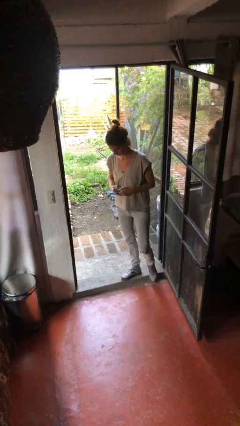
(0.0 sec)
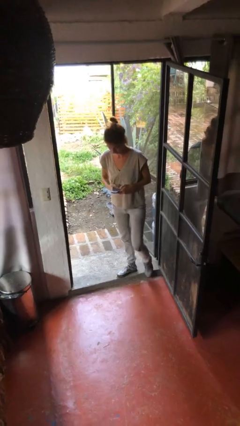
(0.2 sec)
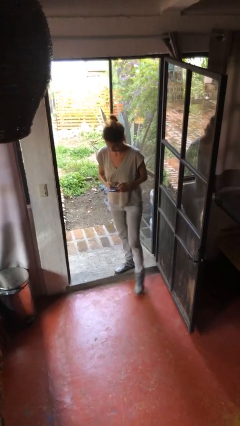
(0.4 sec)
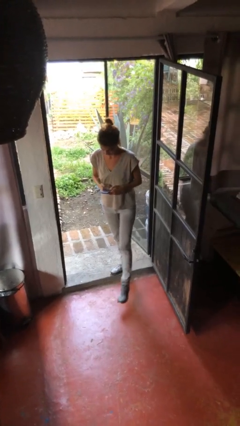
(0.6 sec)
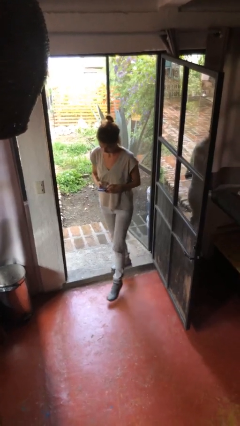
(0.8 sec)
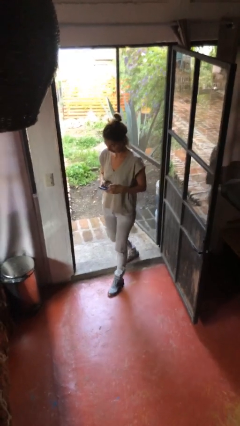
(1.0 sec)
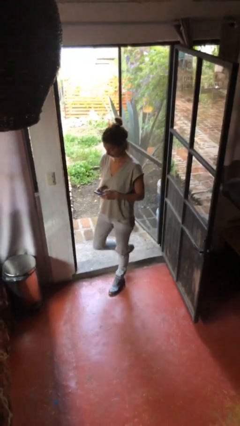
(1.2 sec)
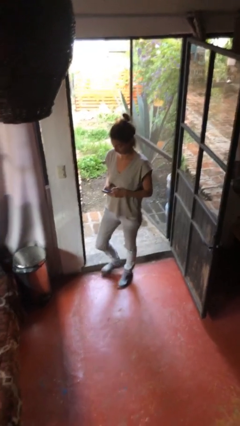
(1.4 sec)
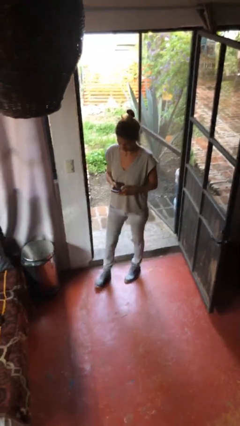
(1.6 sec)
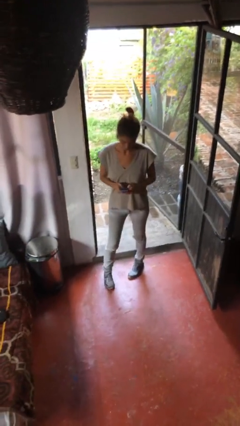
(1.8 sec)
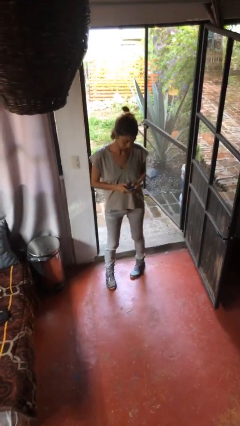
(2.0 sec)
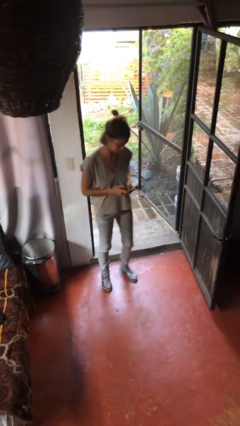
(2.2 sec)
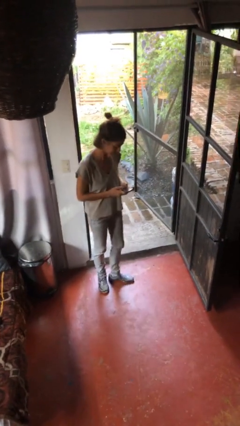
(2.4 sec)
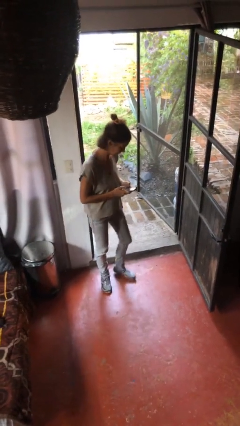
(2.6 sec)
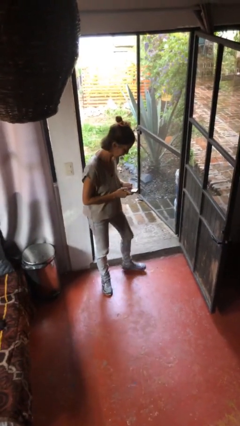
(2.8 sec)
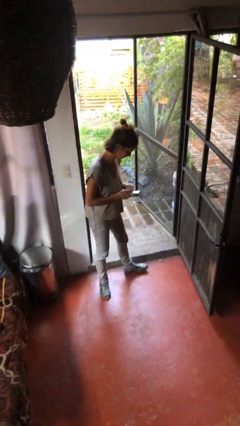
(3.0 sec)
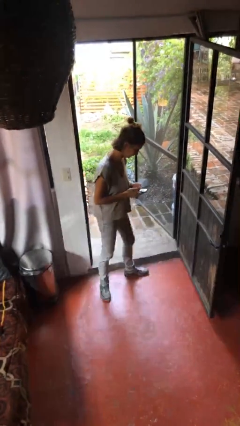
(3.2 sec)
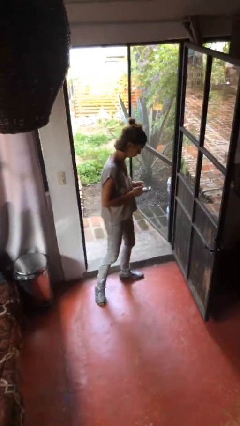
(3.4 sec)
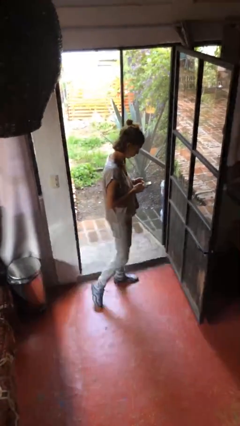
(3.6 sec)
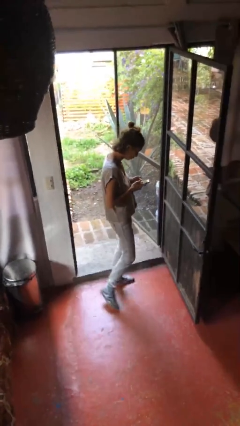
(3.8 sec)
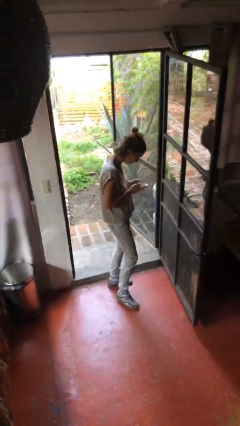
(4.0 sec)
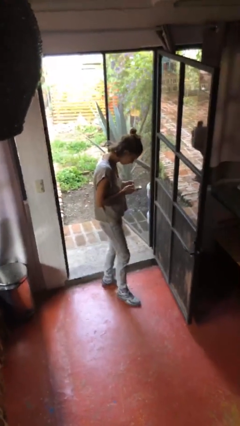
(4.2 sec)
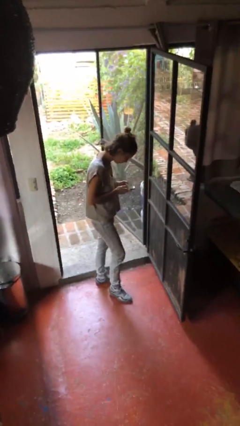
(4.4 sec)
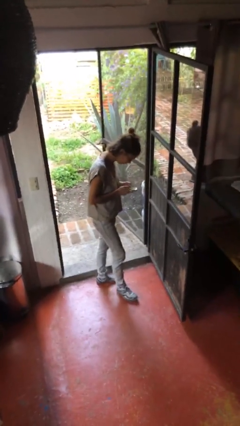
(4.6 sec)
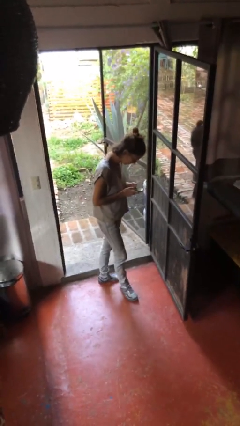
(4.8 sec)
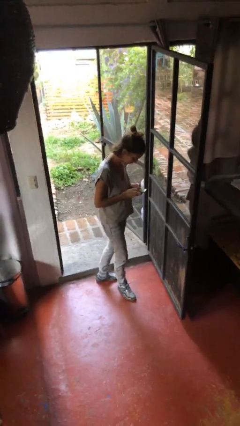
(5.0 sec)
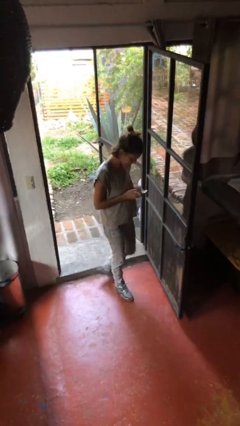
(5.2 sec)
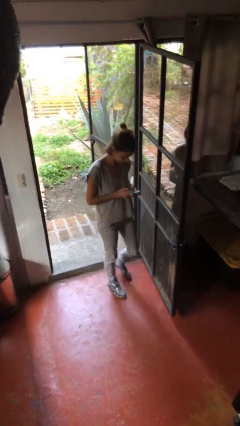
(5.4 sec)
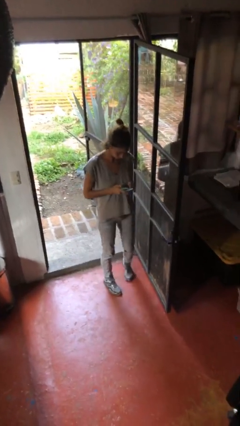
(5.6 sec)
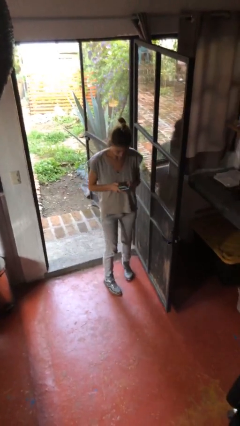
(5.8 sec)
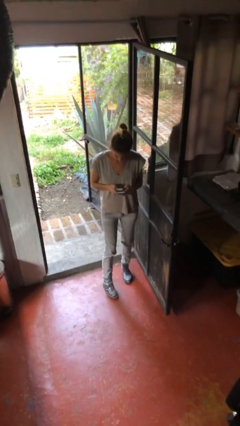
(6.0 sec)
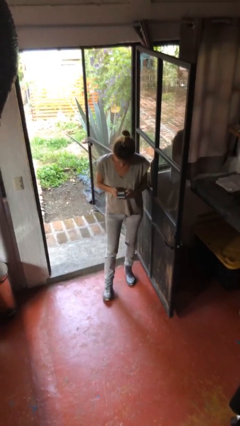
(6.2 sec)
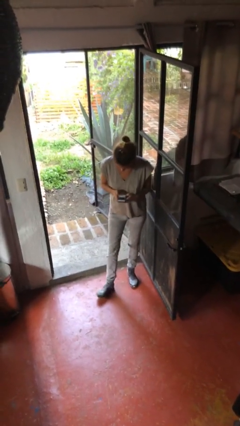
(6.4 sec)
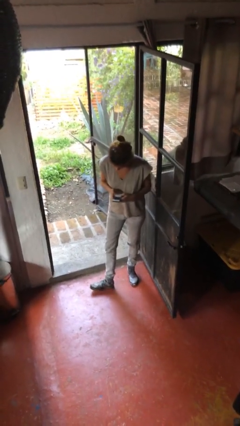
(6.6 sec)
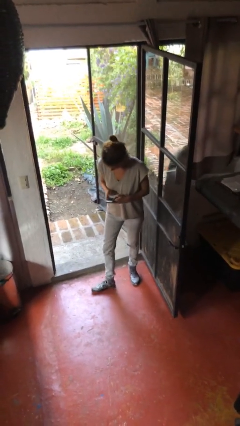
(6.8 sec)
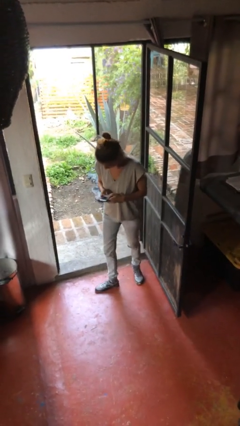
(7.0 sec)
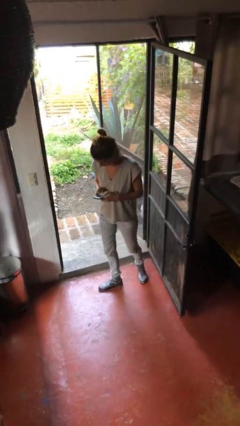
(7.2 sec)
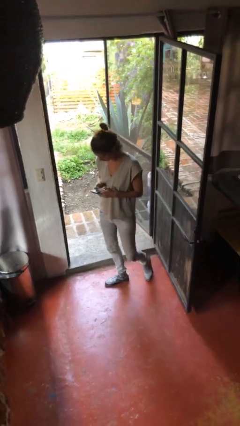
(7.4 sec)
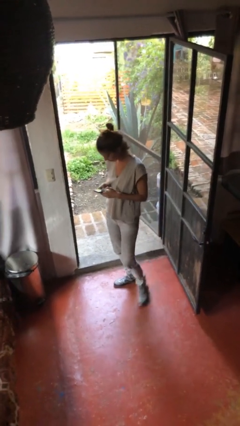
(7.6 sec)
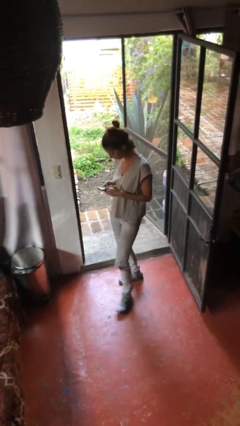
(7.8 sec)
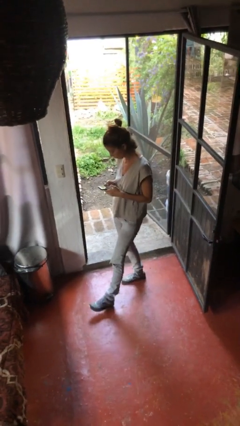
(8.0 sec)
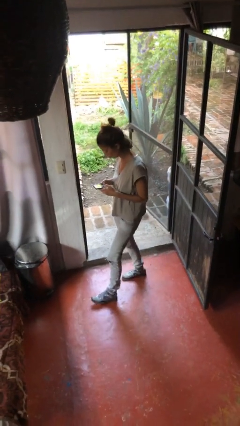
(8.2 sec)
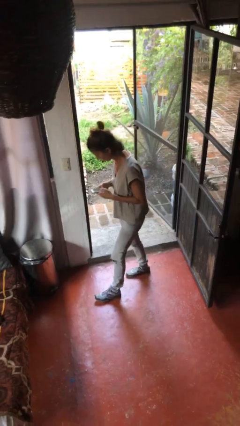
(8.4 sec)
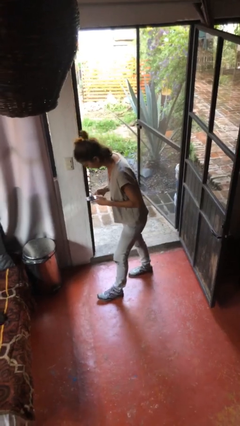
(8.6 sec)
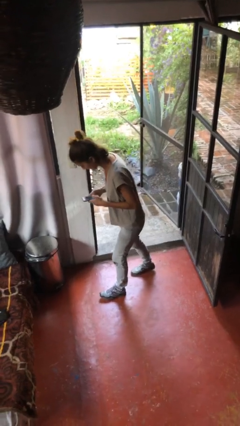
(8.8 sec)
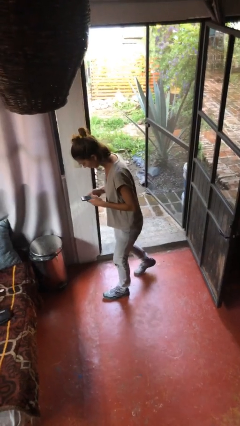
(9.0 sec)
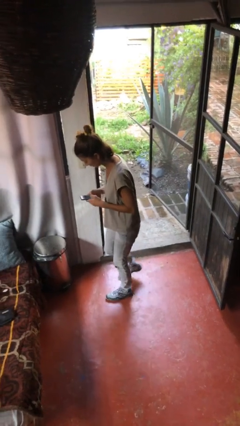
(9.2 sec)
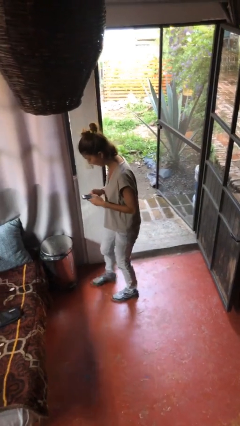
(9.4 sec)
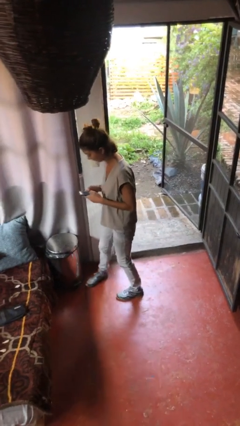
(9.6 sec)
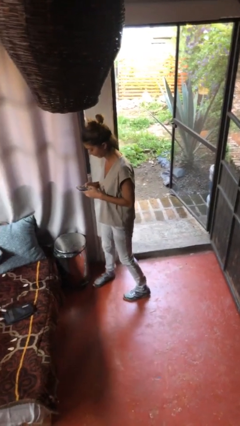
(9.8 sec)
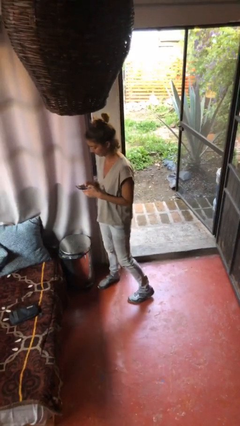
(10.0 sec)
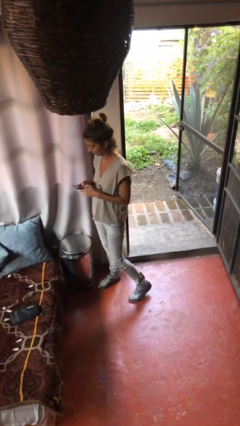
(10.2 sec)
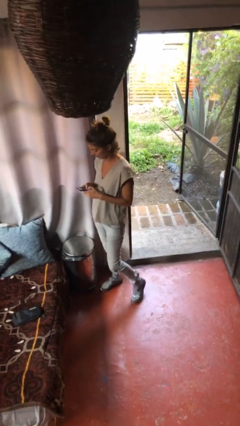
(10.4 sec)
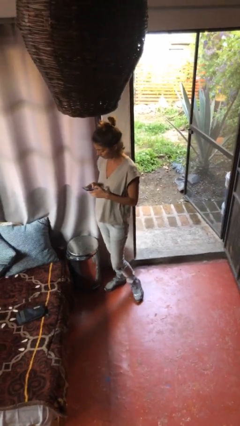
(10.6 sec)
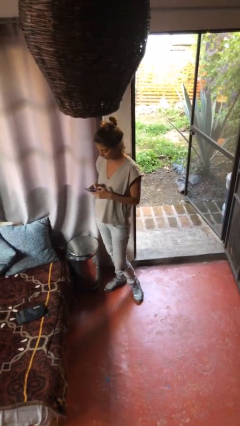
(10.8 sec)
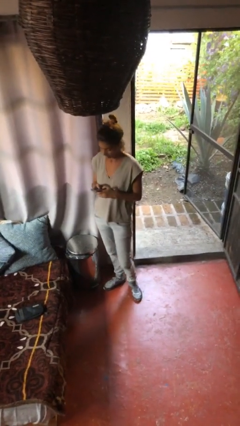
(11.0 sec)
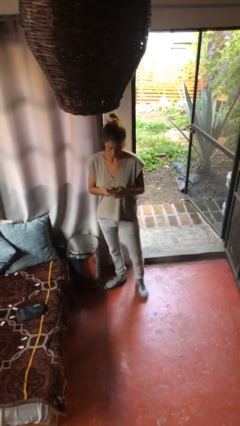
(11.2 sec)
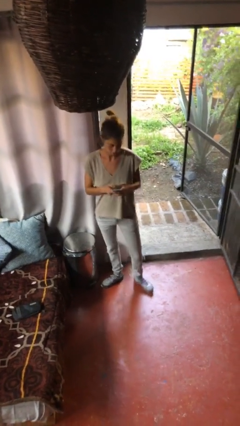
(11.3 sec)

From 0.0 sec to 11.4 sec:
person texts on phone

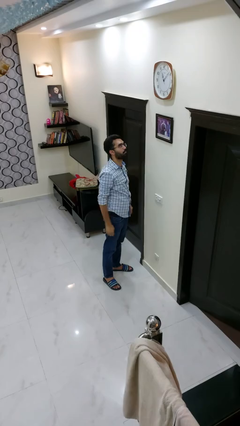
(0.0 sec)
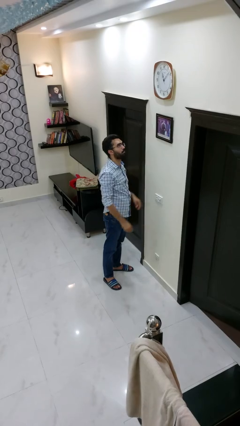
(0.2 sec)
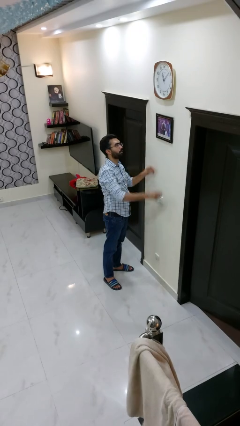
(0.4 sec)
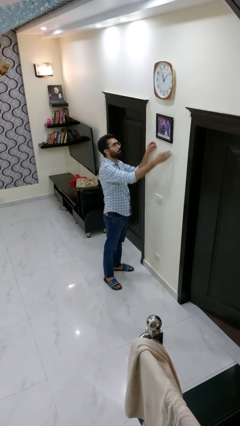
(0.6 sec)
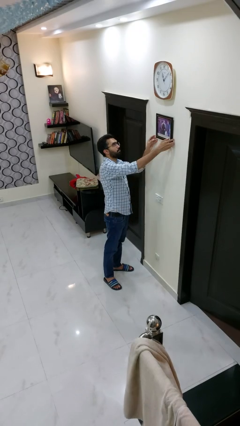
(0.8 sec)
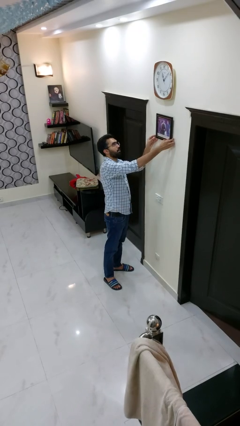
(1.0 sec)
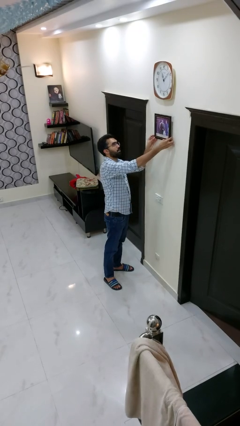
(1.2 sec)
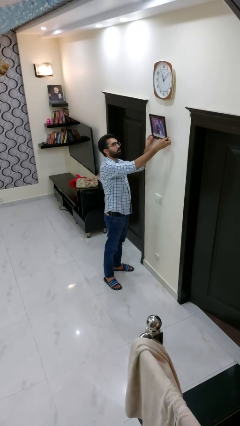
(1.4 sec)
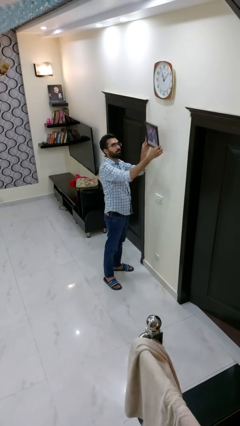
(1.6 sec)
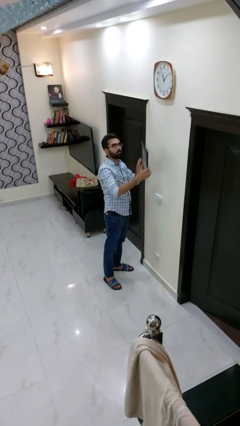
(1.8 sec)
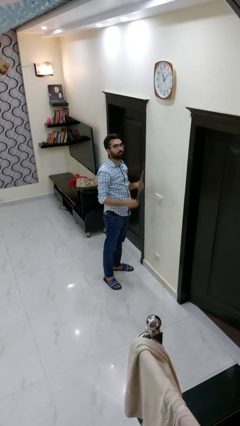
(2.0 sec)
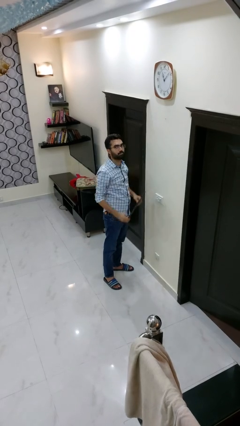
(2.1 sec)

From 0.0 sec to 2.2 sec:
person takes down picture frame

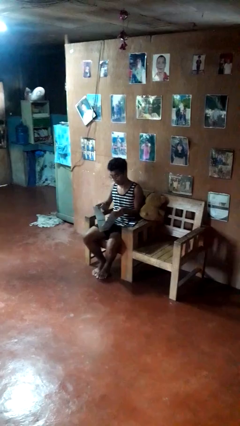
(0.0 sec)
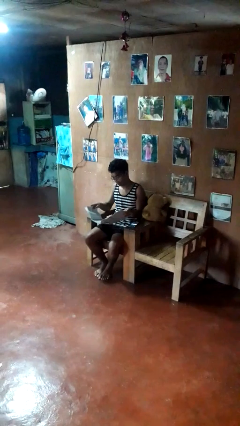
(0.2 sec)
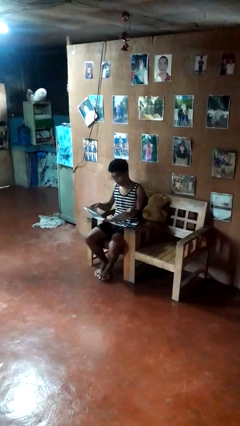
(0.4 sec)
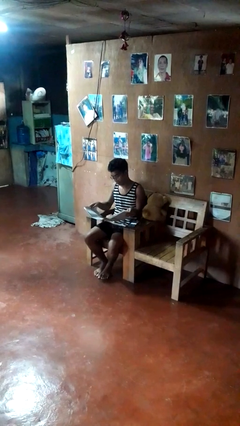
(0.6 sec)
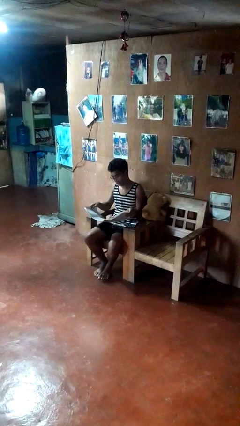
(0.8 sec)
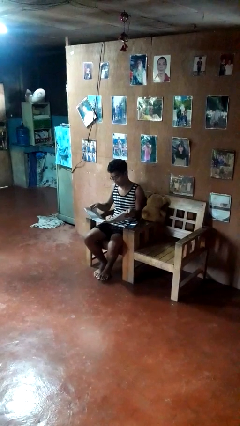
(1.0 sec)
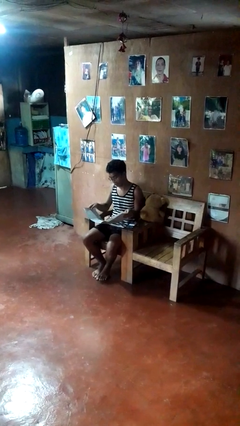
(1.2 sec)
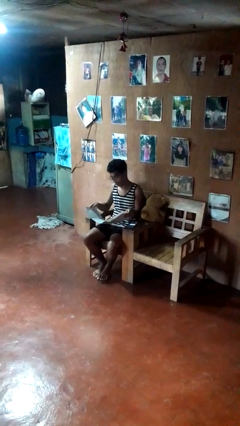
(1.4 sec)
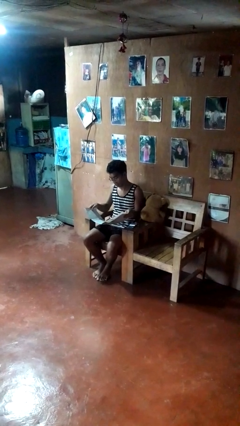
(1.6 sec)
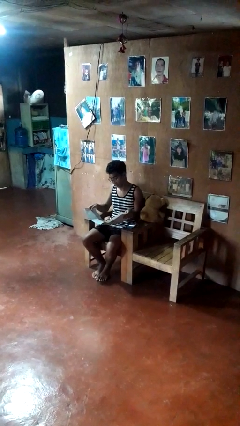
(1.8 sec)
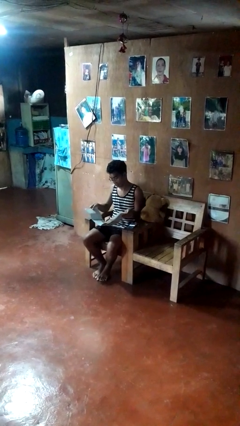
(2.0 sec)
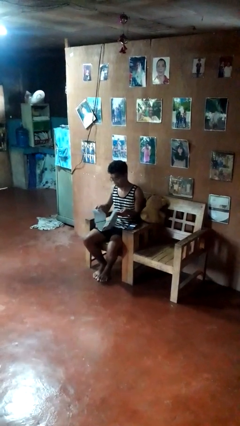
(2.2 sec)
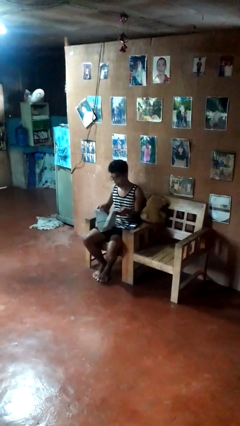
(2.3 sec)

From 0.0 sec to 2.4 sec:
person reads newspaper

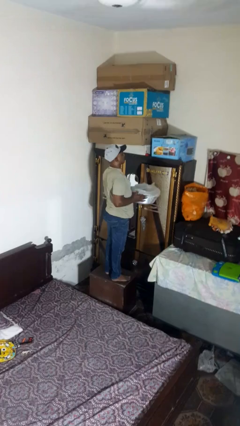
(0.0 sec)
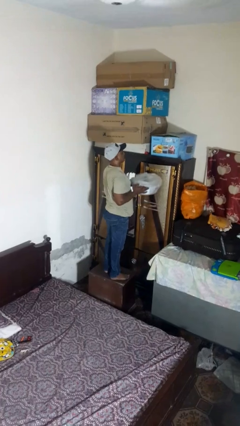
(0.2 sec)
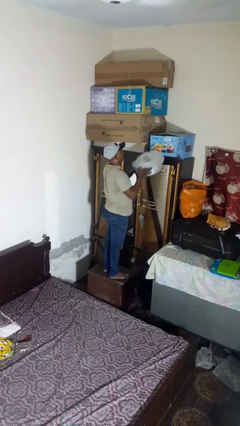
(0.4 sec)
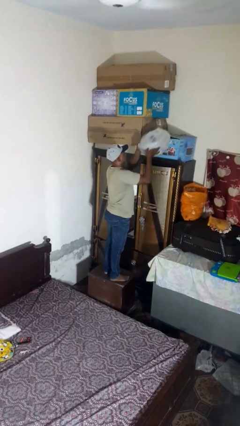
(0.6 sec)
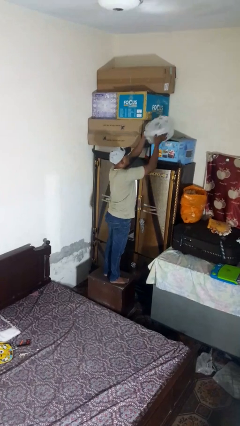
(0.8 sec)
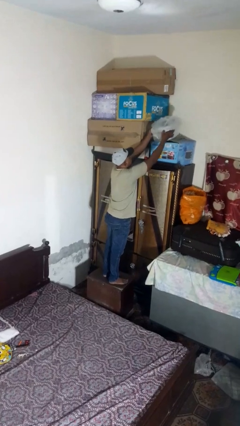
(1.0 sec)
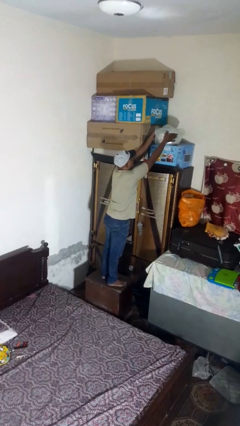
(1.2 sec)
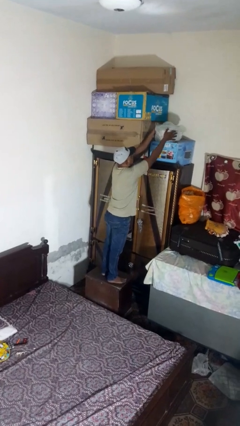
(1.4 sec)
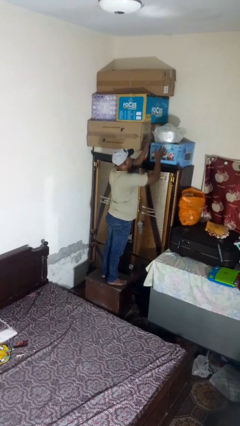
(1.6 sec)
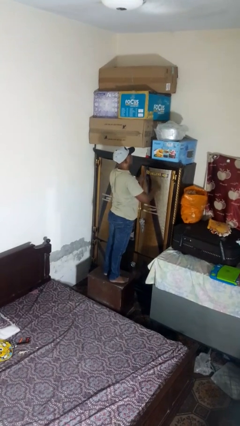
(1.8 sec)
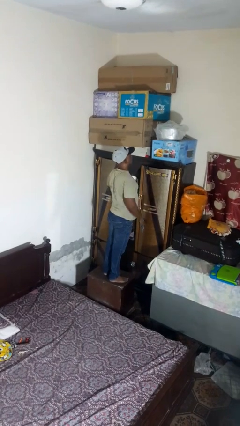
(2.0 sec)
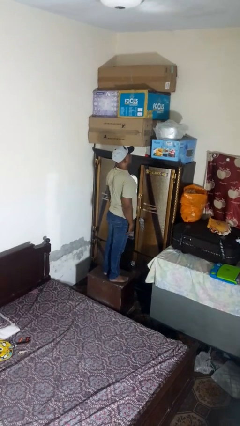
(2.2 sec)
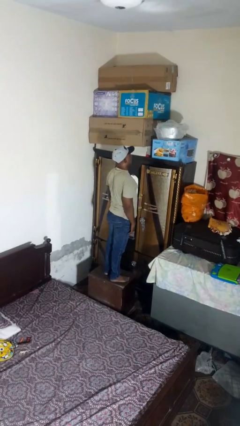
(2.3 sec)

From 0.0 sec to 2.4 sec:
person picks up object from shelf
